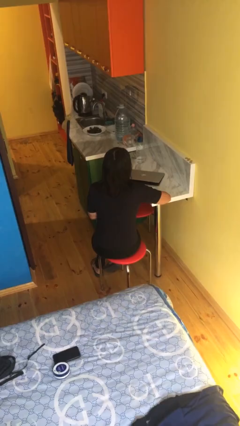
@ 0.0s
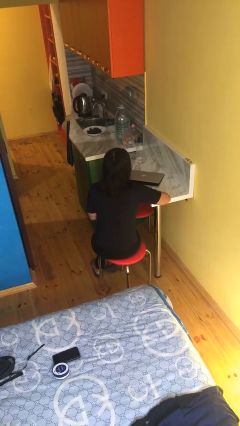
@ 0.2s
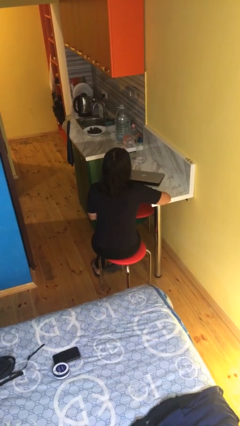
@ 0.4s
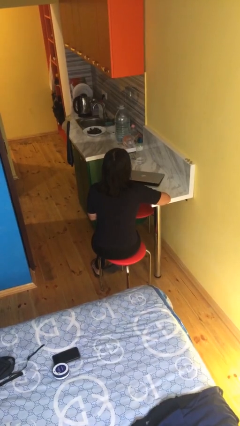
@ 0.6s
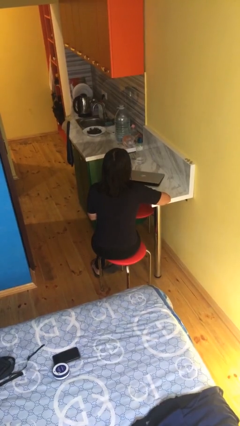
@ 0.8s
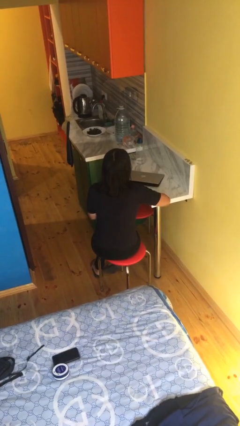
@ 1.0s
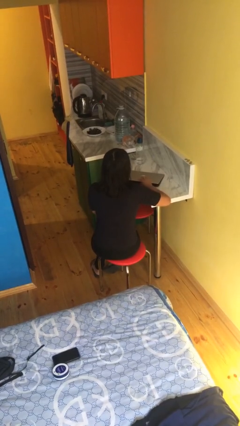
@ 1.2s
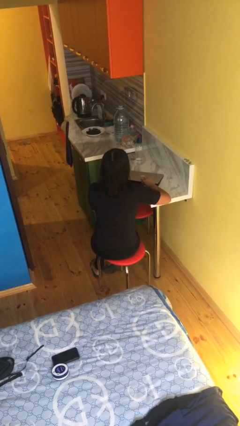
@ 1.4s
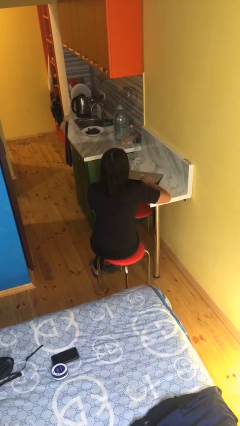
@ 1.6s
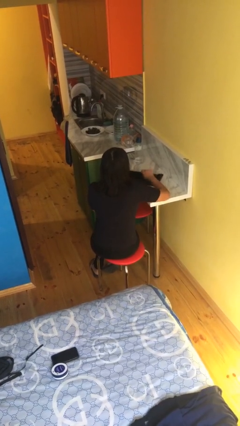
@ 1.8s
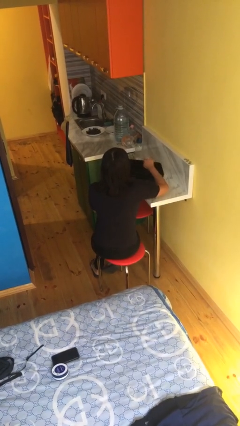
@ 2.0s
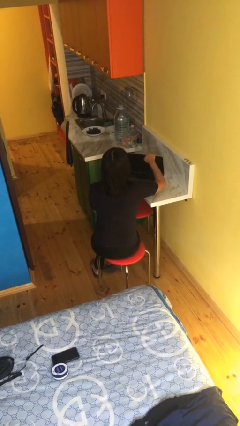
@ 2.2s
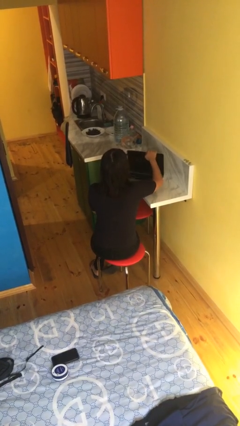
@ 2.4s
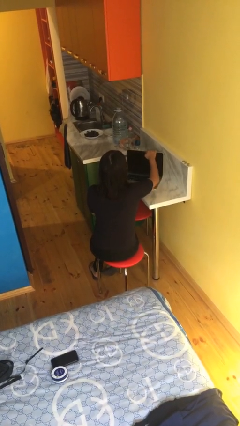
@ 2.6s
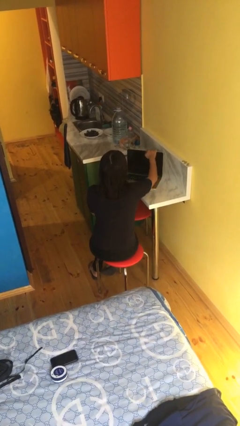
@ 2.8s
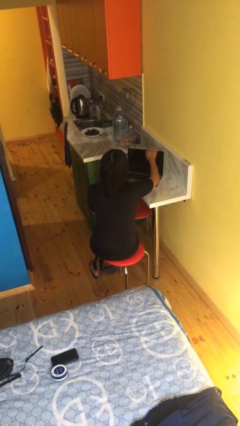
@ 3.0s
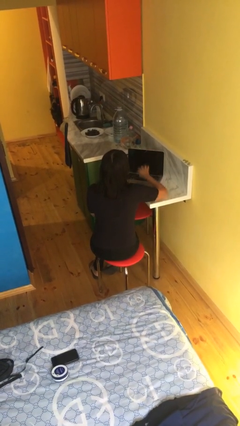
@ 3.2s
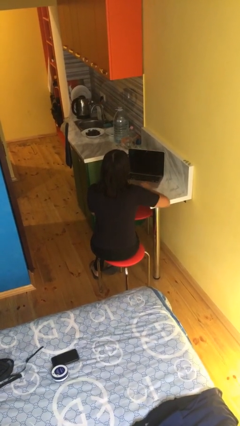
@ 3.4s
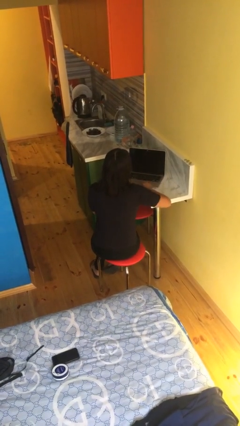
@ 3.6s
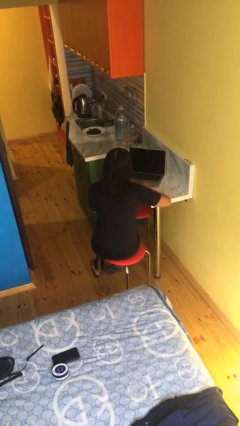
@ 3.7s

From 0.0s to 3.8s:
person opens laptop

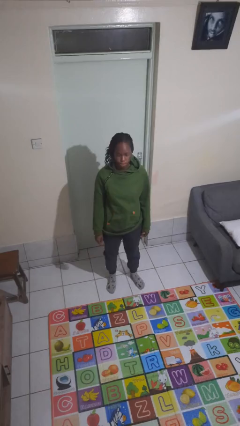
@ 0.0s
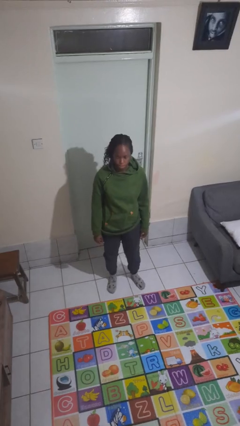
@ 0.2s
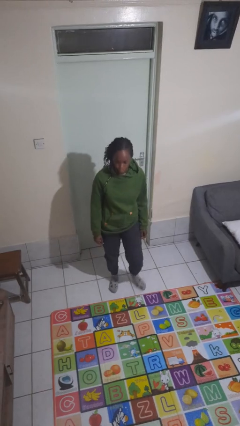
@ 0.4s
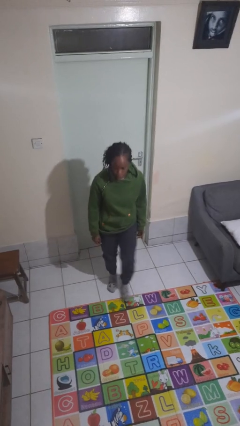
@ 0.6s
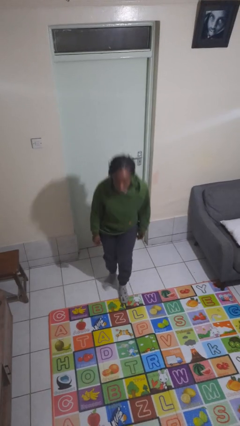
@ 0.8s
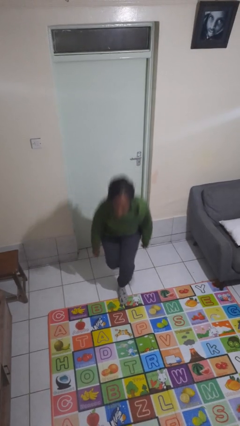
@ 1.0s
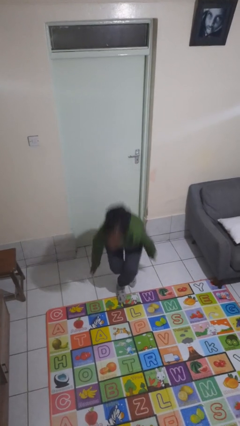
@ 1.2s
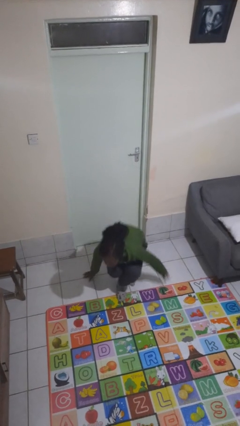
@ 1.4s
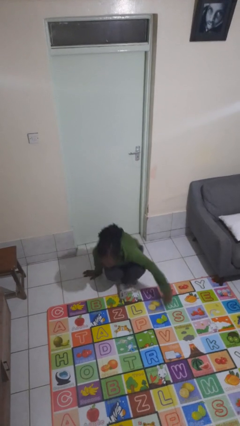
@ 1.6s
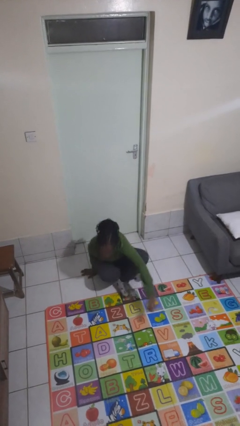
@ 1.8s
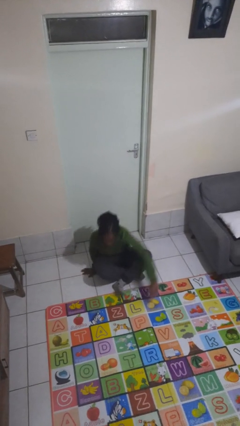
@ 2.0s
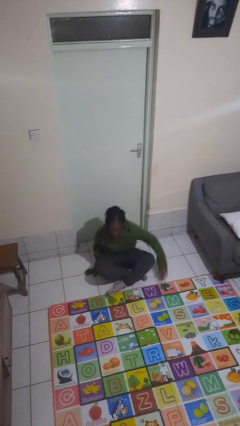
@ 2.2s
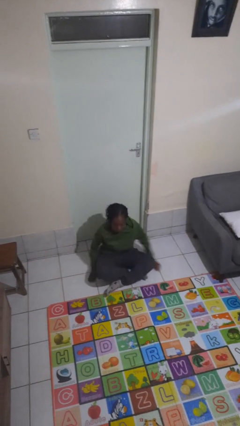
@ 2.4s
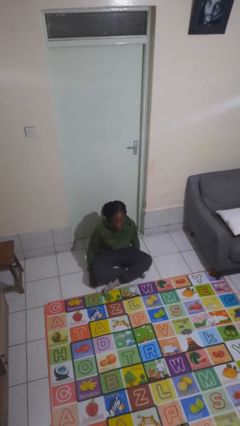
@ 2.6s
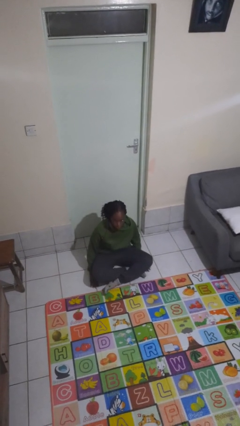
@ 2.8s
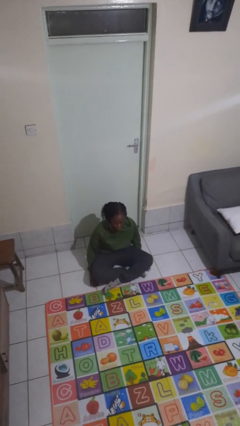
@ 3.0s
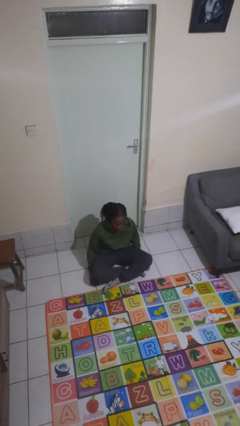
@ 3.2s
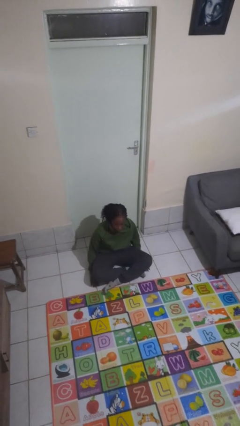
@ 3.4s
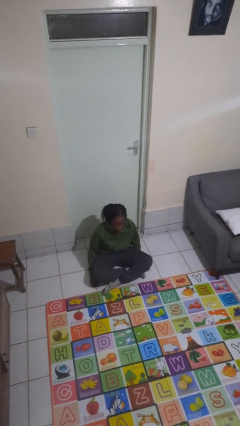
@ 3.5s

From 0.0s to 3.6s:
person sits crisscross

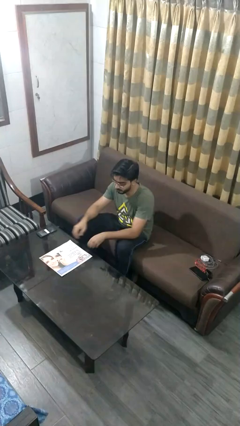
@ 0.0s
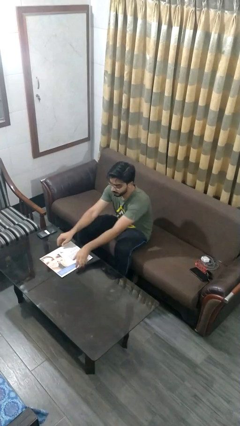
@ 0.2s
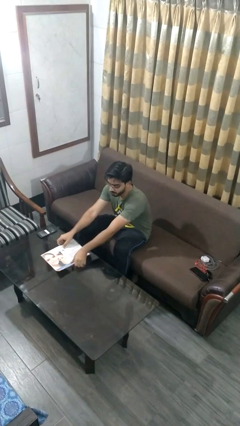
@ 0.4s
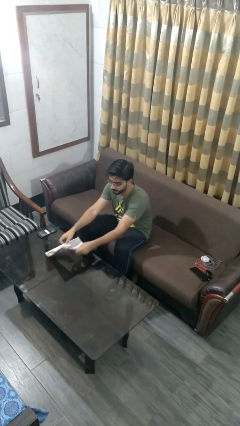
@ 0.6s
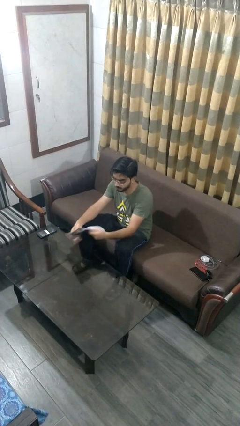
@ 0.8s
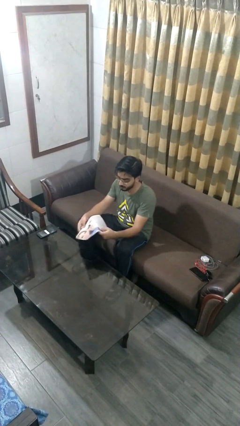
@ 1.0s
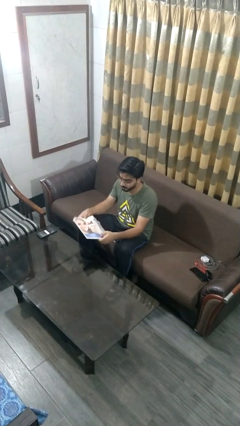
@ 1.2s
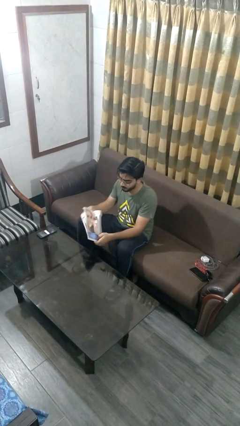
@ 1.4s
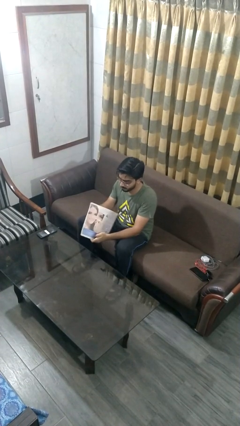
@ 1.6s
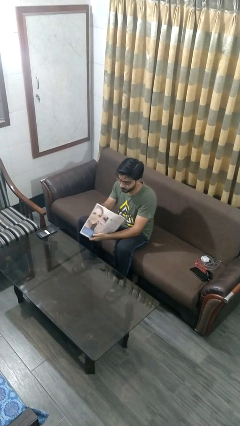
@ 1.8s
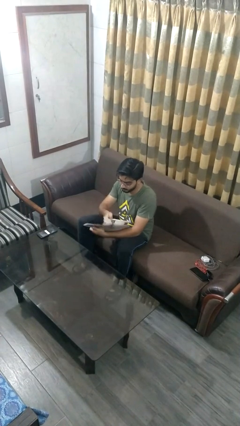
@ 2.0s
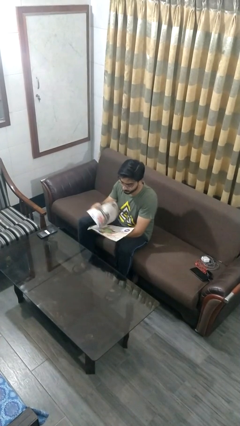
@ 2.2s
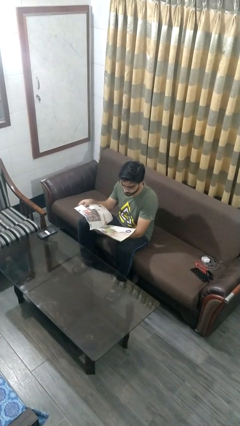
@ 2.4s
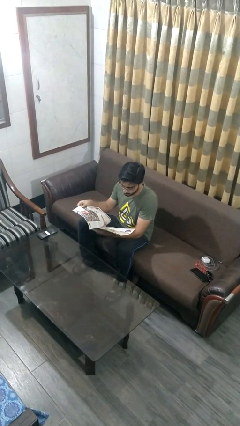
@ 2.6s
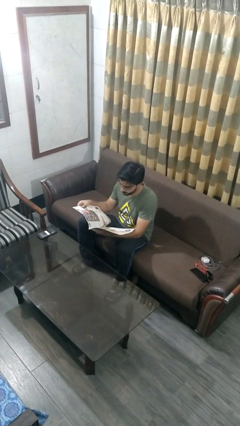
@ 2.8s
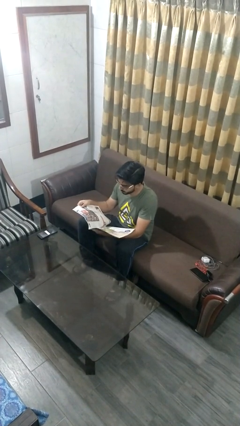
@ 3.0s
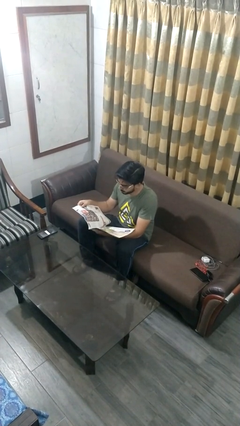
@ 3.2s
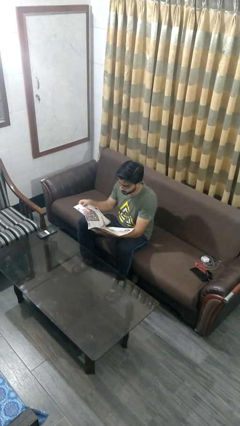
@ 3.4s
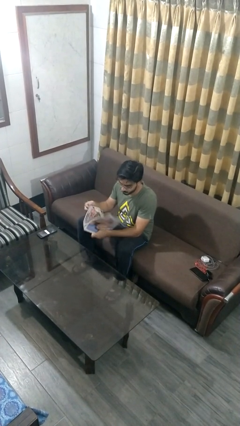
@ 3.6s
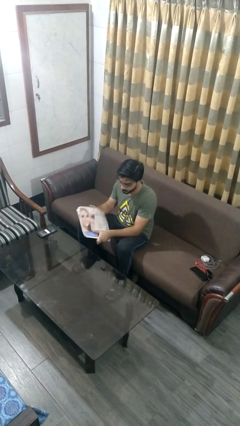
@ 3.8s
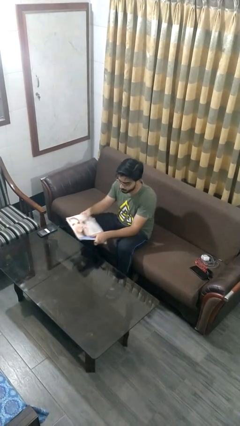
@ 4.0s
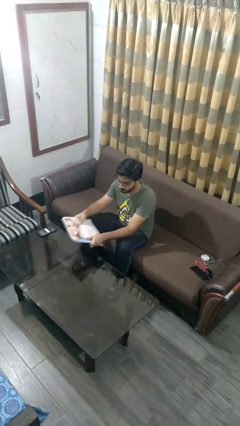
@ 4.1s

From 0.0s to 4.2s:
person reads magazine

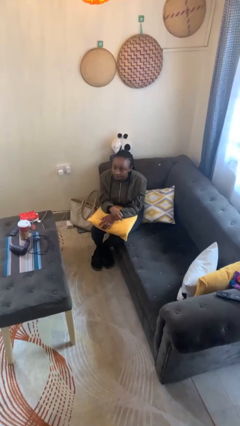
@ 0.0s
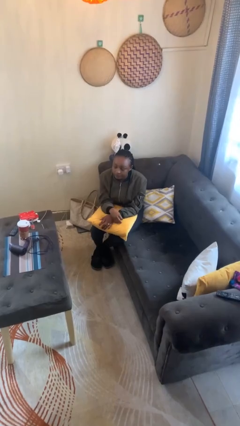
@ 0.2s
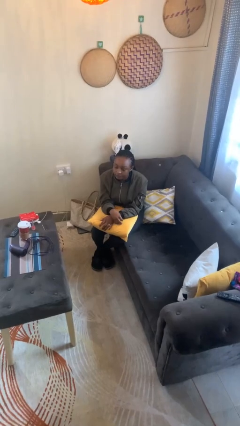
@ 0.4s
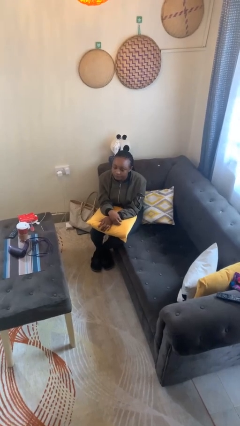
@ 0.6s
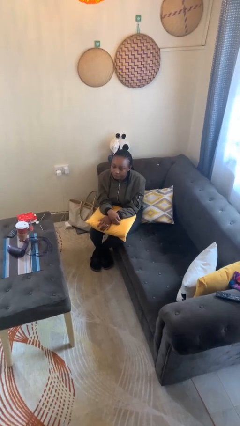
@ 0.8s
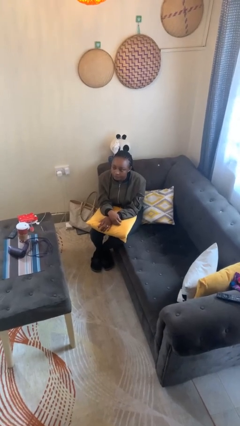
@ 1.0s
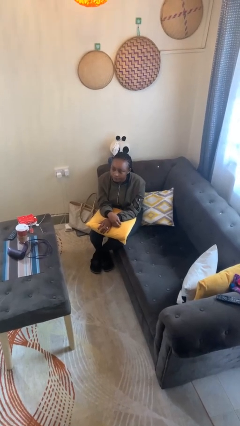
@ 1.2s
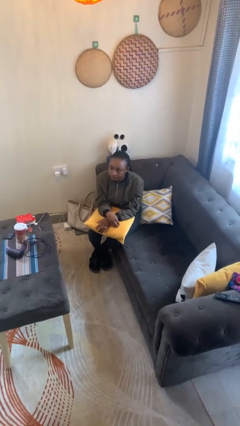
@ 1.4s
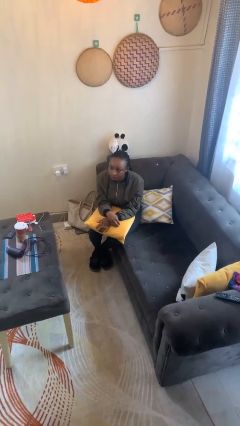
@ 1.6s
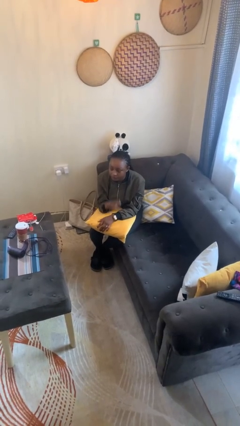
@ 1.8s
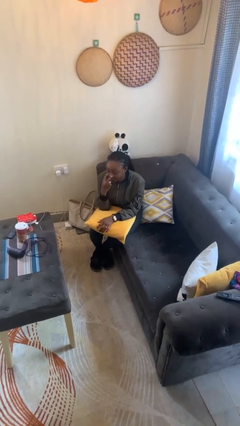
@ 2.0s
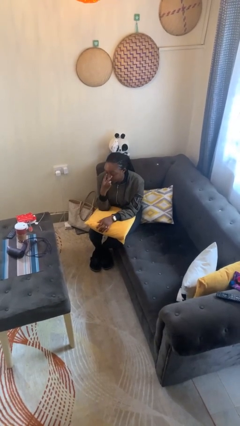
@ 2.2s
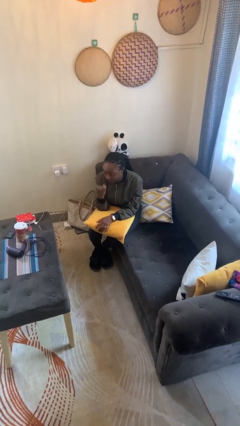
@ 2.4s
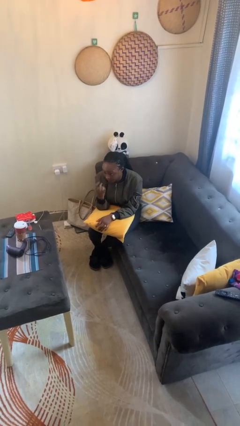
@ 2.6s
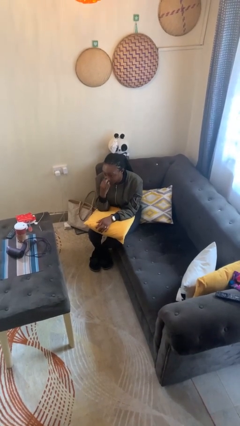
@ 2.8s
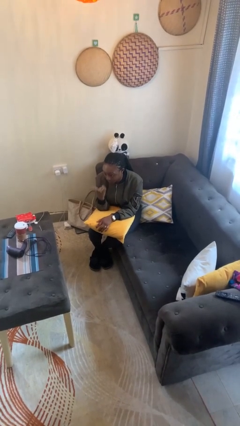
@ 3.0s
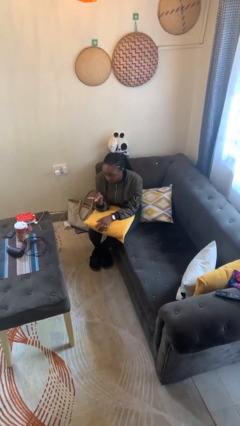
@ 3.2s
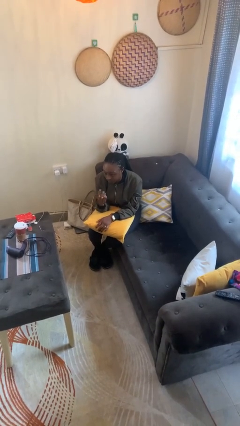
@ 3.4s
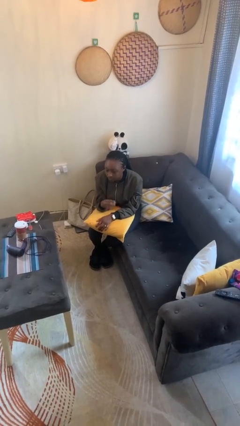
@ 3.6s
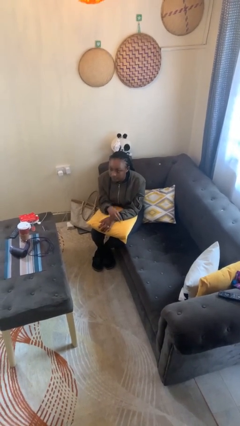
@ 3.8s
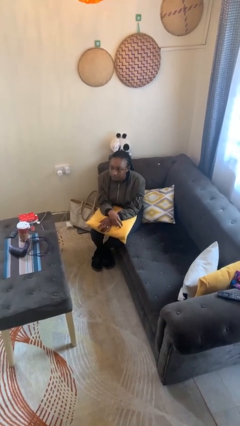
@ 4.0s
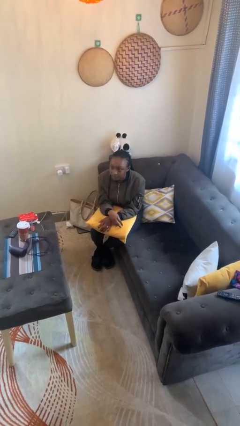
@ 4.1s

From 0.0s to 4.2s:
person gestures watch closely

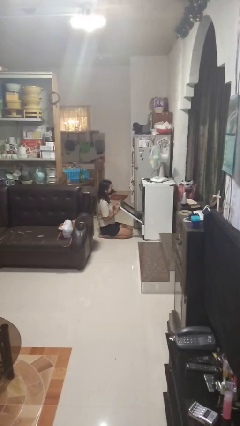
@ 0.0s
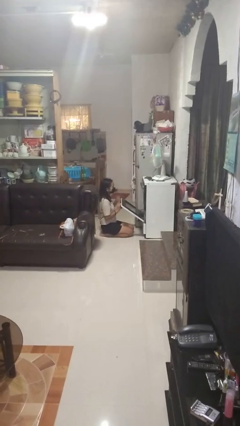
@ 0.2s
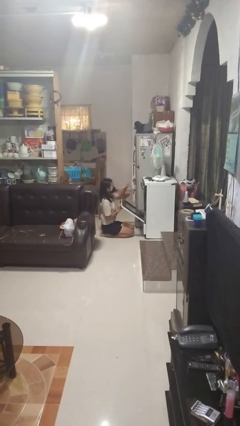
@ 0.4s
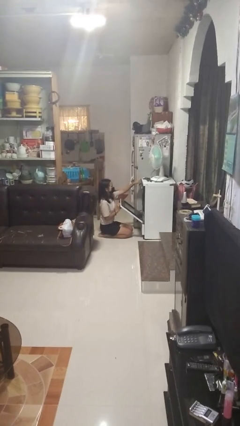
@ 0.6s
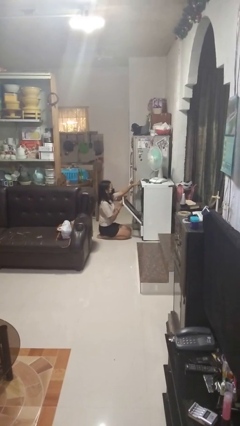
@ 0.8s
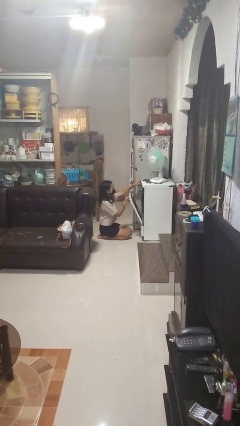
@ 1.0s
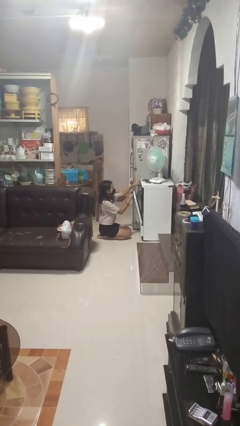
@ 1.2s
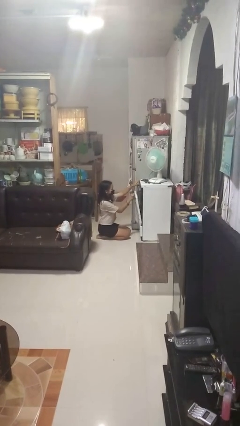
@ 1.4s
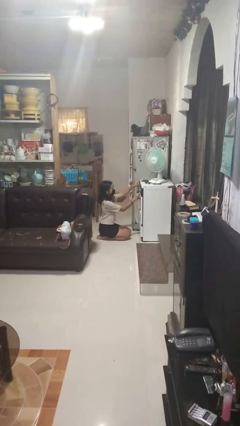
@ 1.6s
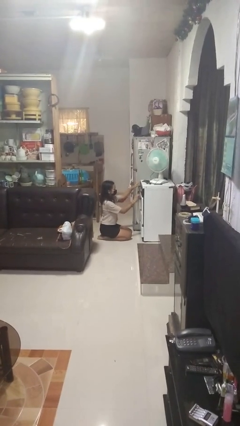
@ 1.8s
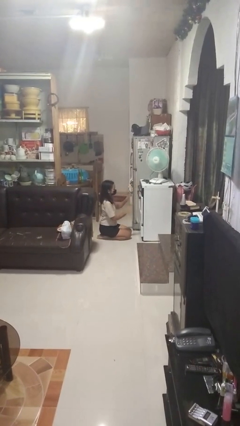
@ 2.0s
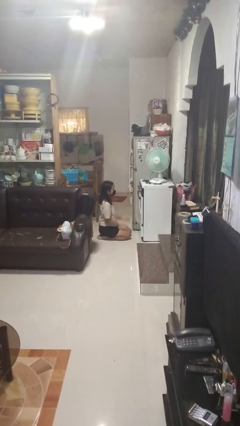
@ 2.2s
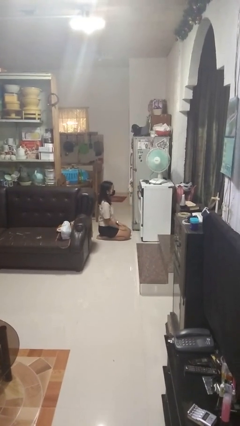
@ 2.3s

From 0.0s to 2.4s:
person closes oven door
